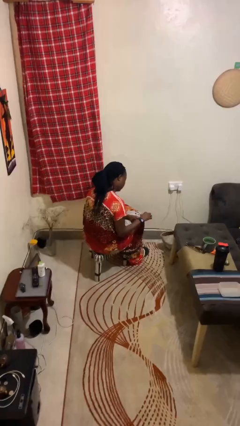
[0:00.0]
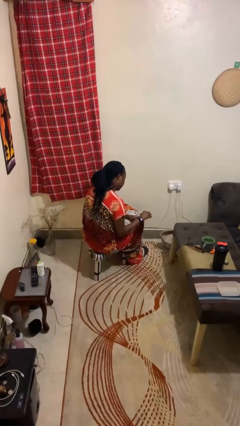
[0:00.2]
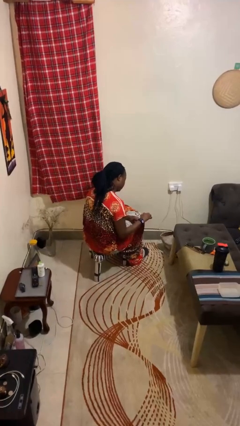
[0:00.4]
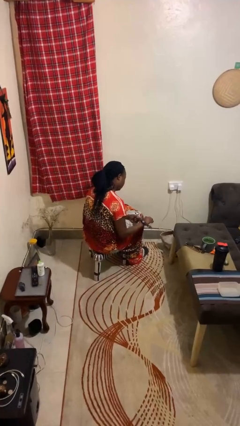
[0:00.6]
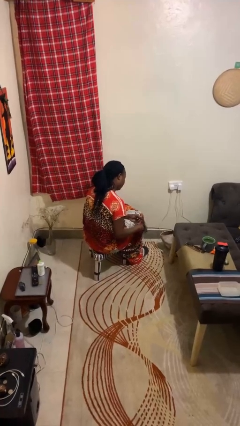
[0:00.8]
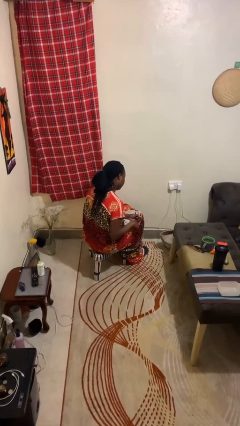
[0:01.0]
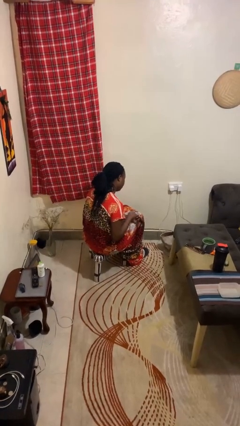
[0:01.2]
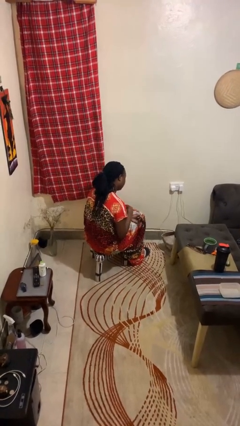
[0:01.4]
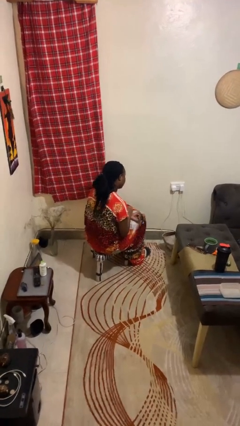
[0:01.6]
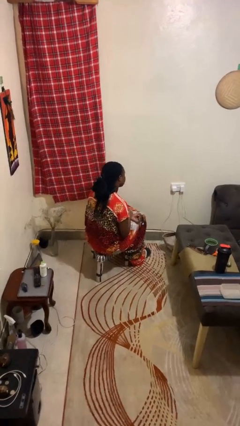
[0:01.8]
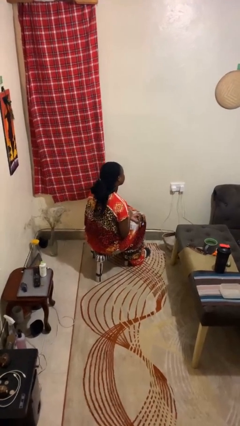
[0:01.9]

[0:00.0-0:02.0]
person takes off wristwatch

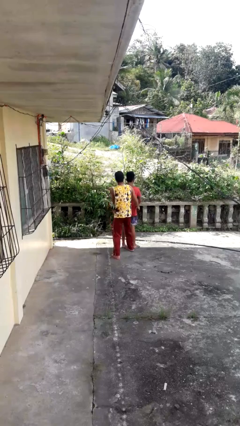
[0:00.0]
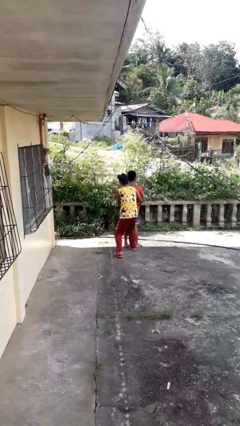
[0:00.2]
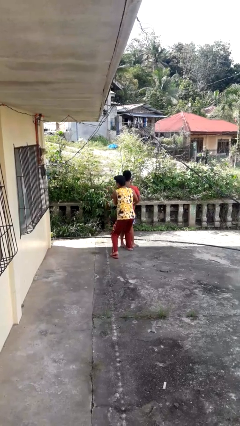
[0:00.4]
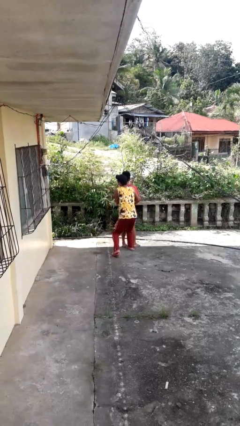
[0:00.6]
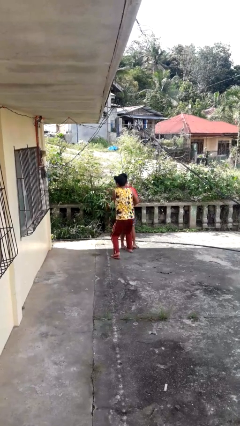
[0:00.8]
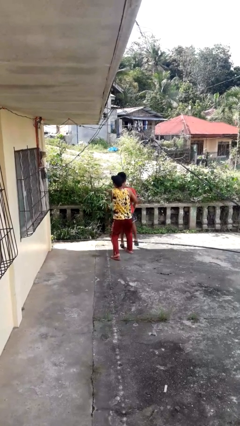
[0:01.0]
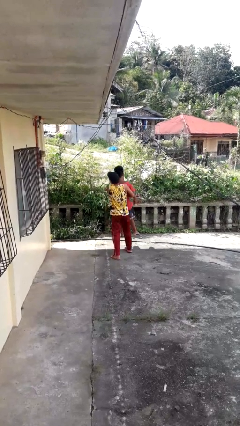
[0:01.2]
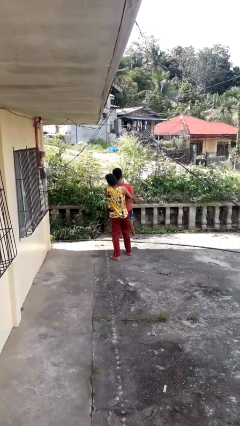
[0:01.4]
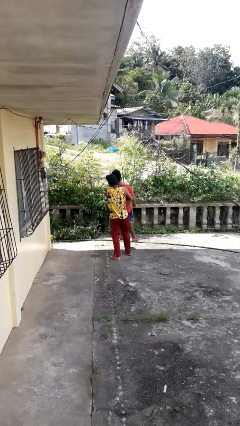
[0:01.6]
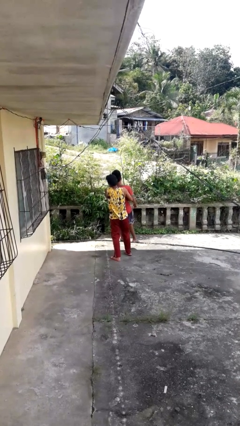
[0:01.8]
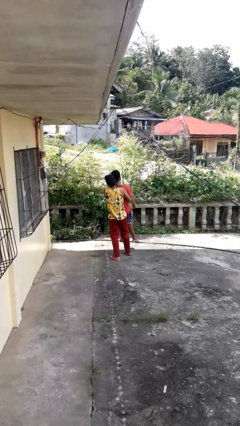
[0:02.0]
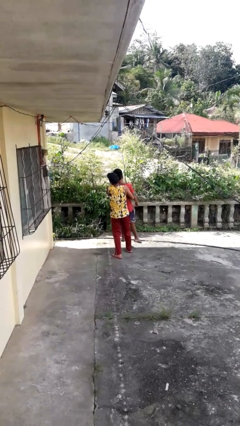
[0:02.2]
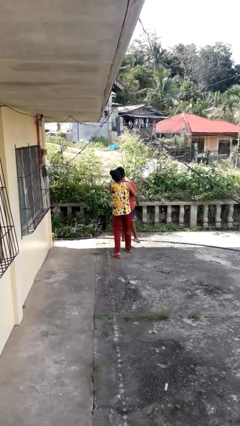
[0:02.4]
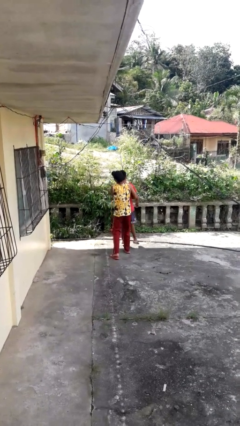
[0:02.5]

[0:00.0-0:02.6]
person picks up person

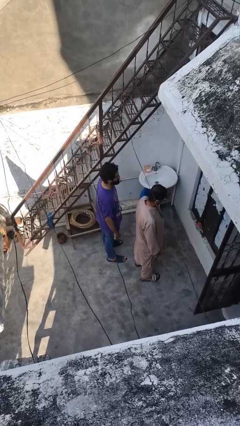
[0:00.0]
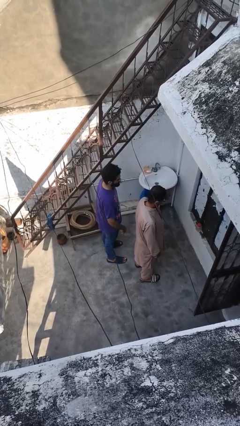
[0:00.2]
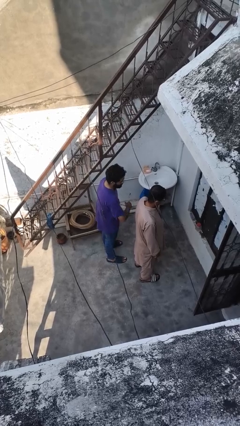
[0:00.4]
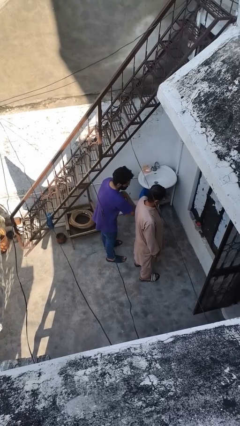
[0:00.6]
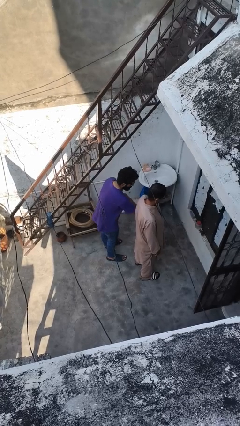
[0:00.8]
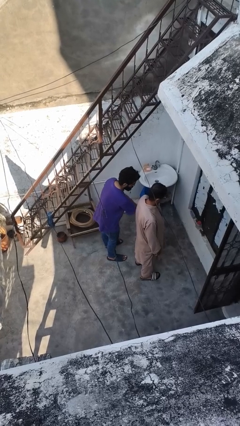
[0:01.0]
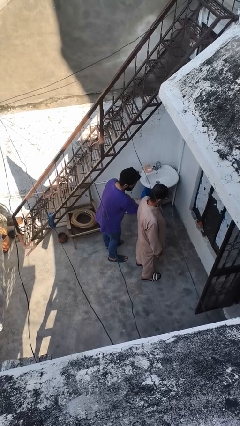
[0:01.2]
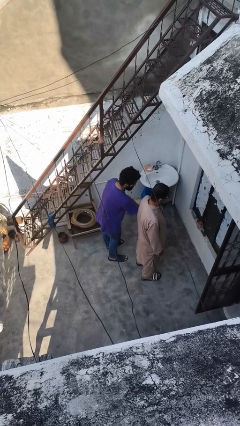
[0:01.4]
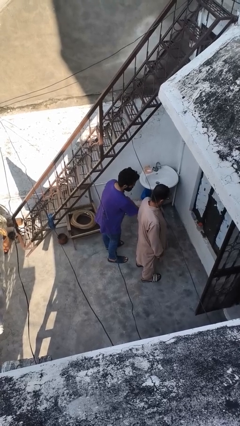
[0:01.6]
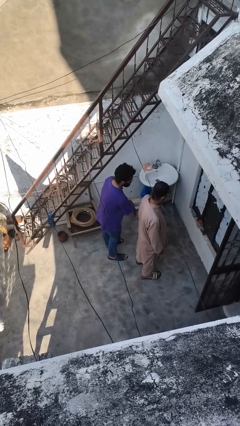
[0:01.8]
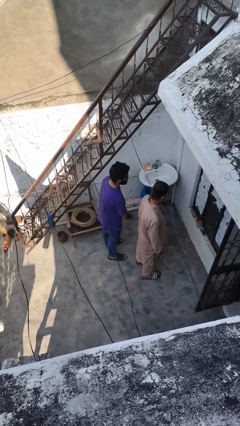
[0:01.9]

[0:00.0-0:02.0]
person nudges person with elbow

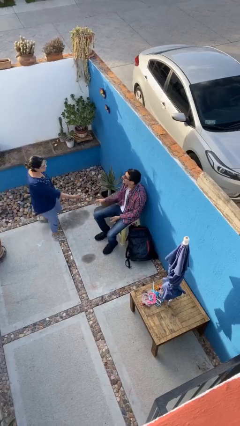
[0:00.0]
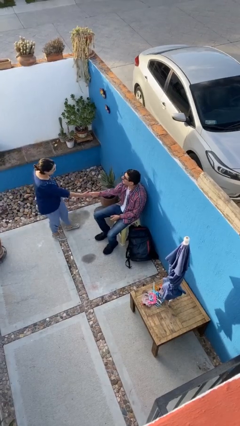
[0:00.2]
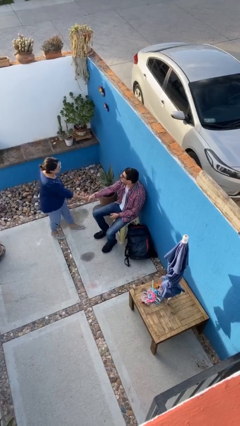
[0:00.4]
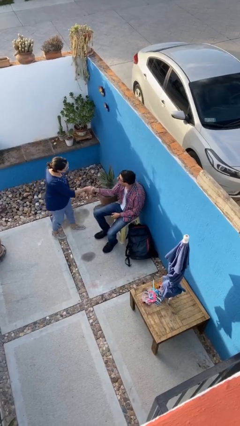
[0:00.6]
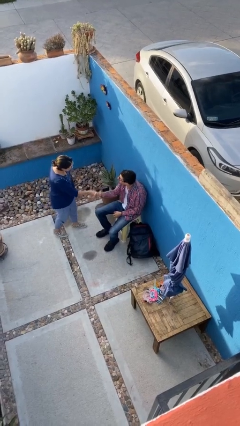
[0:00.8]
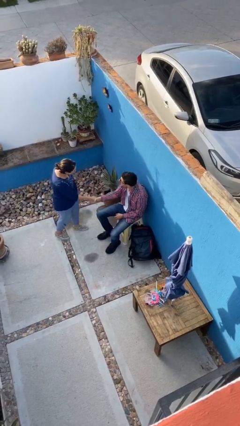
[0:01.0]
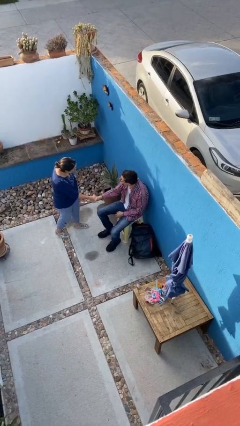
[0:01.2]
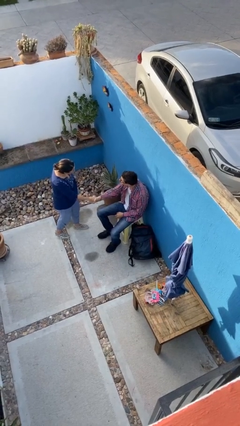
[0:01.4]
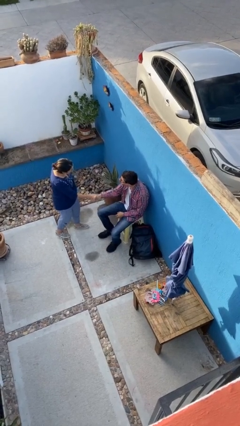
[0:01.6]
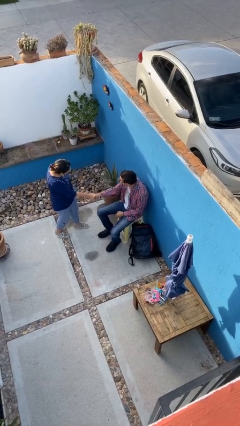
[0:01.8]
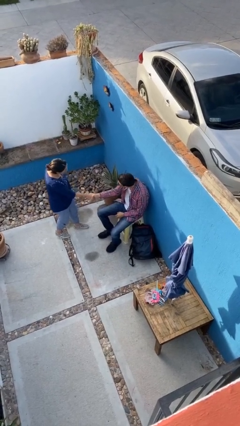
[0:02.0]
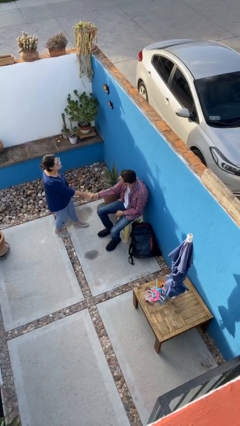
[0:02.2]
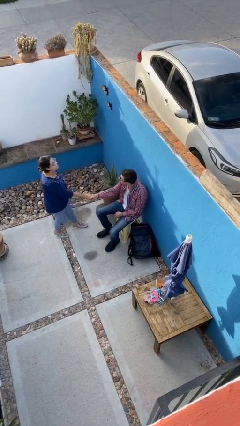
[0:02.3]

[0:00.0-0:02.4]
person shakes hand

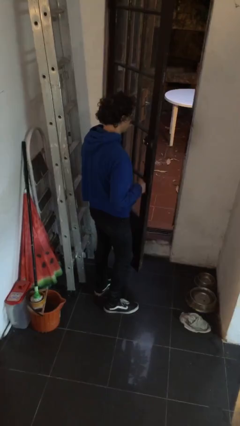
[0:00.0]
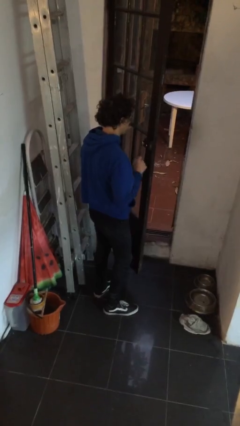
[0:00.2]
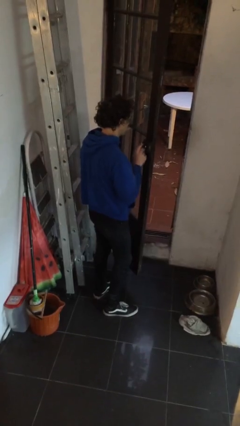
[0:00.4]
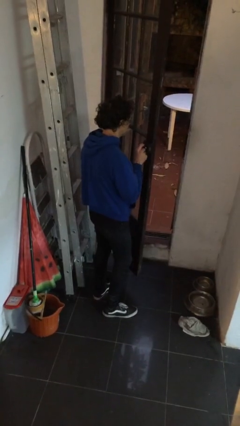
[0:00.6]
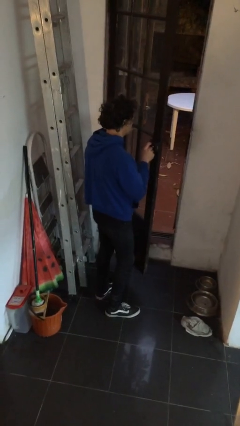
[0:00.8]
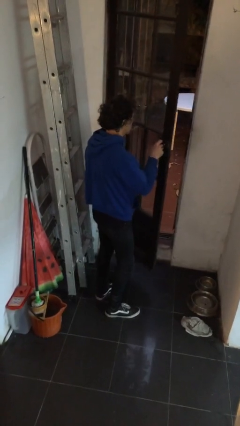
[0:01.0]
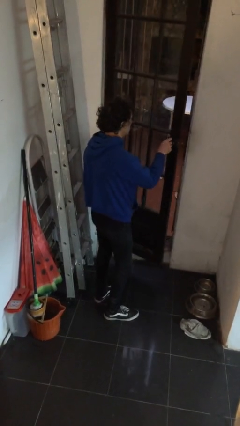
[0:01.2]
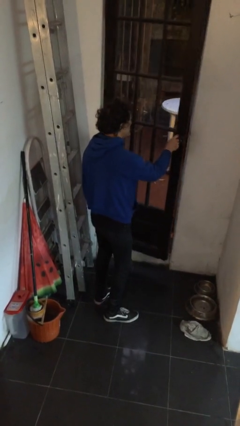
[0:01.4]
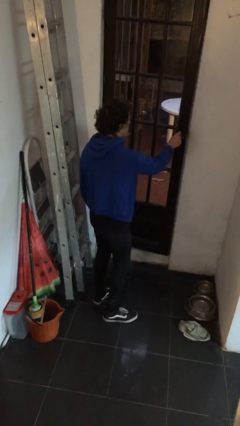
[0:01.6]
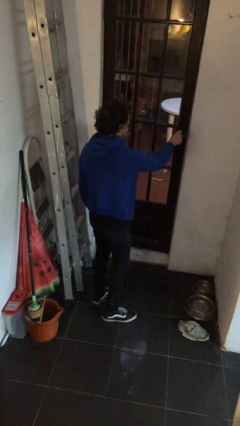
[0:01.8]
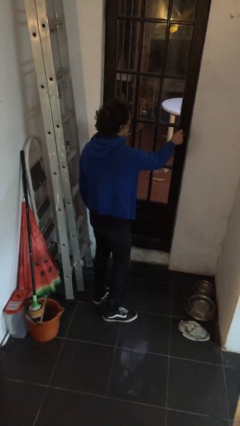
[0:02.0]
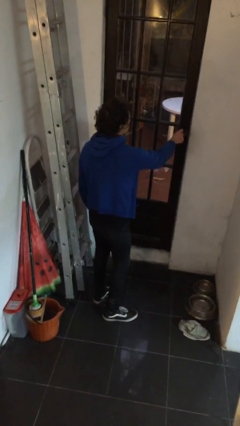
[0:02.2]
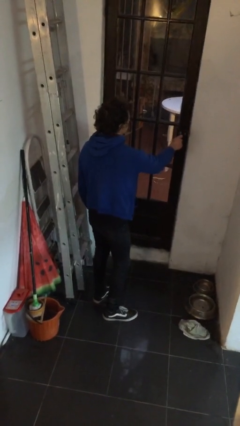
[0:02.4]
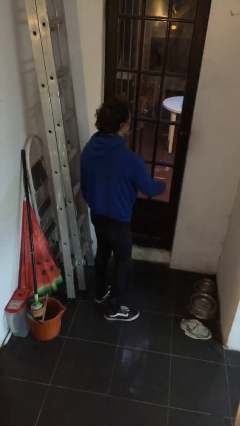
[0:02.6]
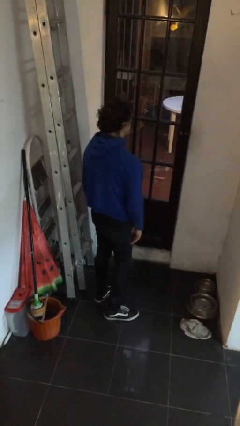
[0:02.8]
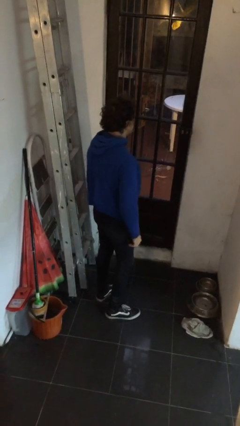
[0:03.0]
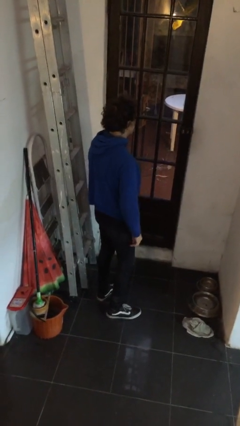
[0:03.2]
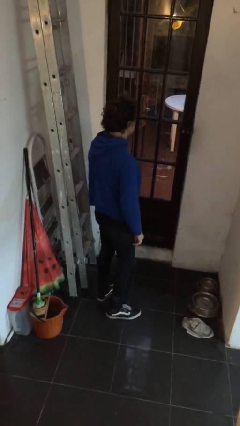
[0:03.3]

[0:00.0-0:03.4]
person closes facility door

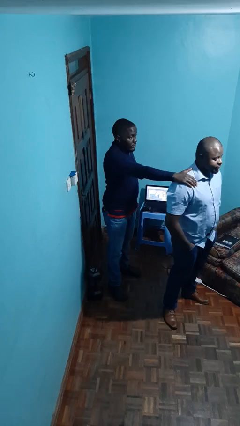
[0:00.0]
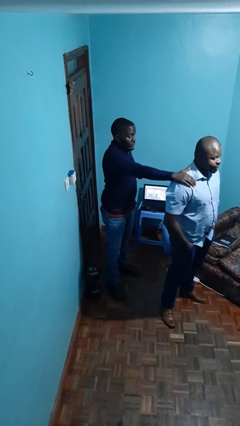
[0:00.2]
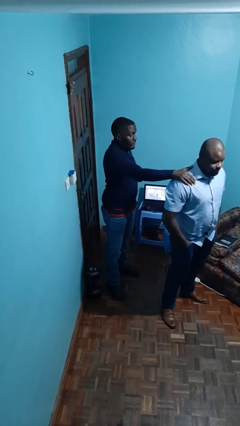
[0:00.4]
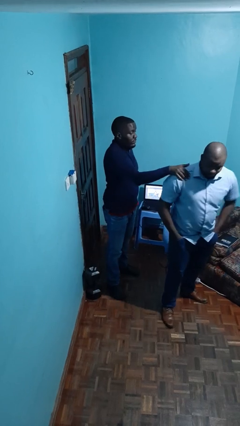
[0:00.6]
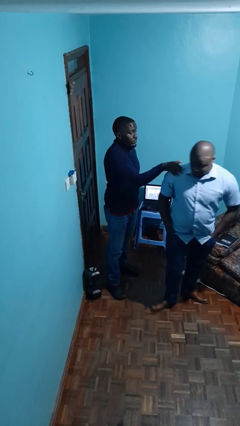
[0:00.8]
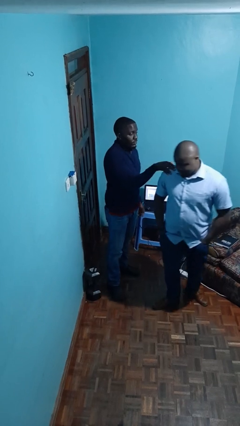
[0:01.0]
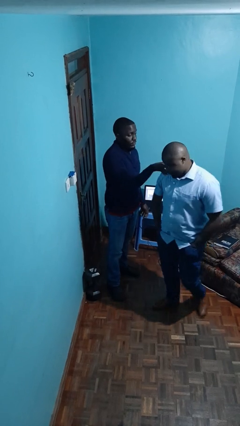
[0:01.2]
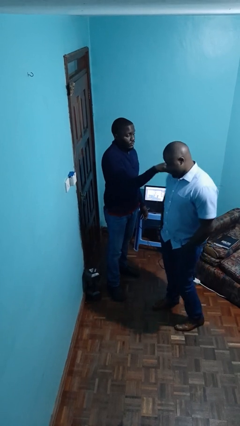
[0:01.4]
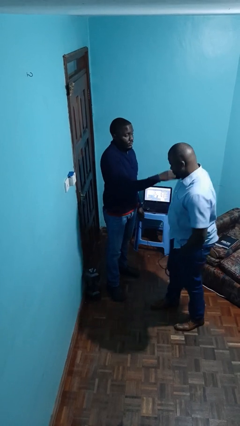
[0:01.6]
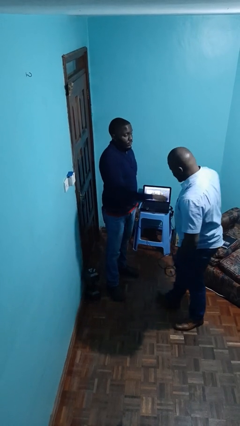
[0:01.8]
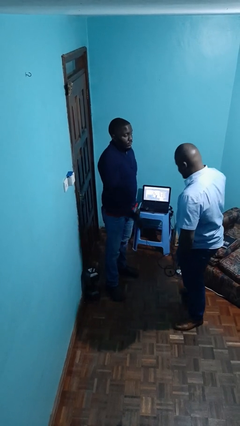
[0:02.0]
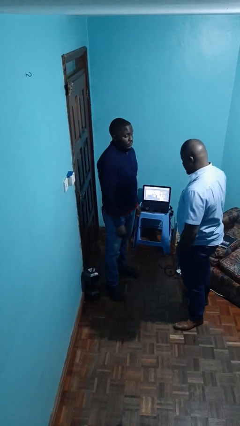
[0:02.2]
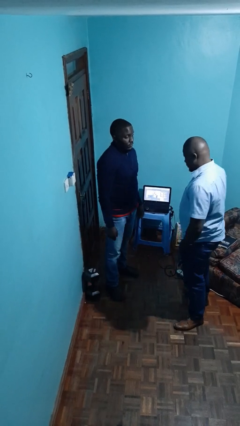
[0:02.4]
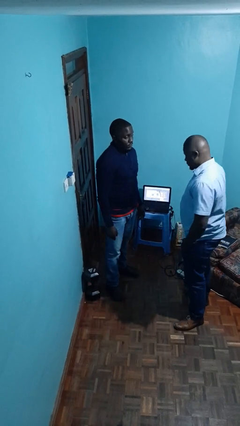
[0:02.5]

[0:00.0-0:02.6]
person spins person around

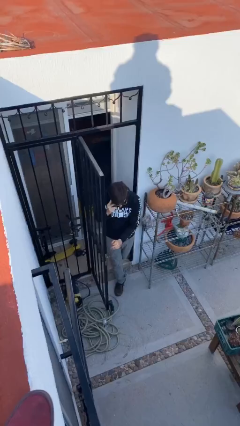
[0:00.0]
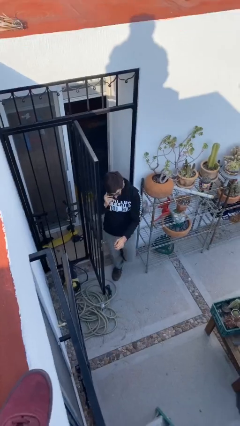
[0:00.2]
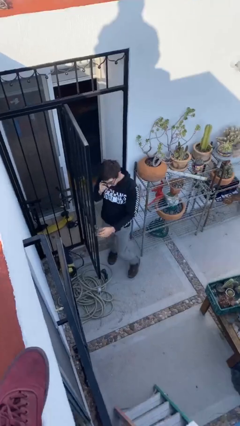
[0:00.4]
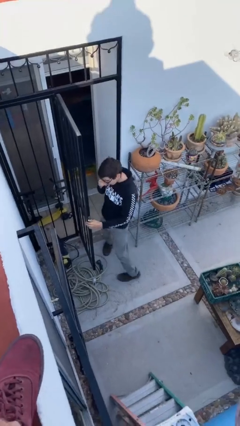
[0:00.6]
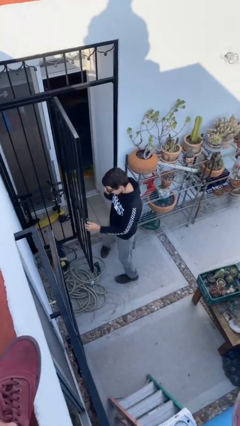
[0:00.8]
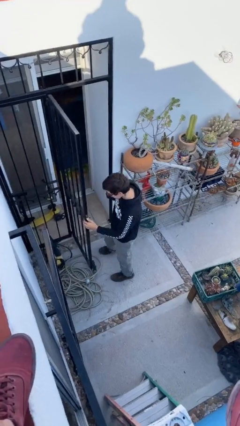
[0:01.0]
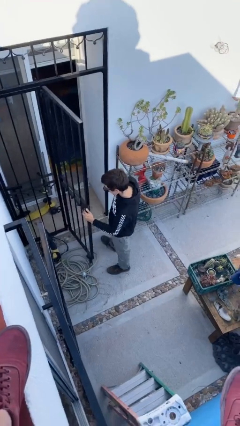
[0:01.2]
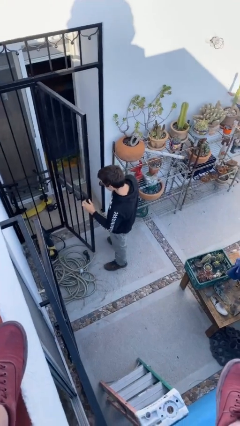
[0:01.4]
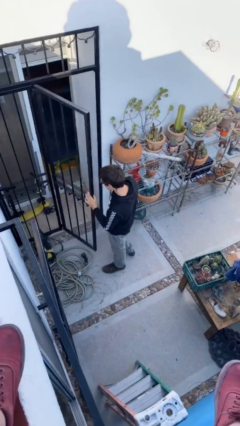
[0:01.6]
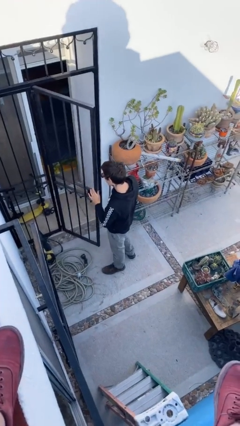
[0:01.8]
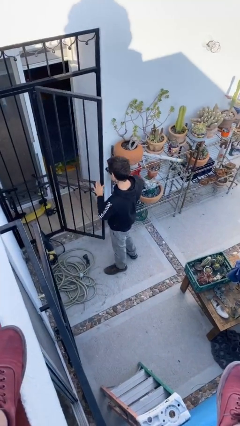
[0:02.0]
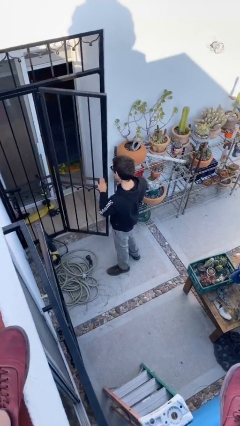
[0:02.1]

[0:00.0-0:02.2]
person enters scene through structure
